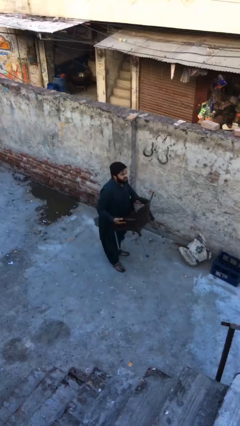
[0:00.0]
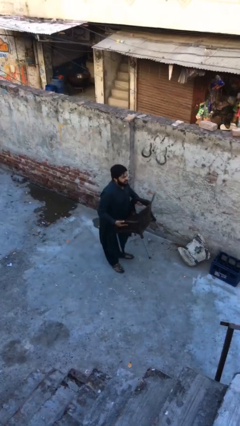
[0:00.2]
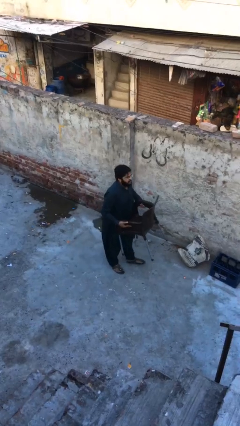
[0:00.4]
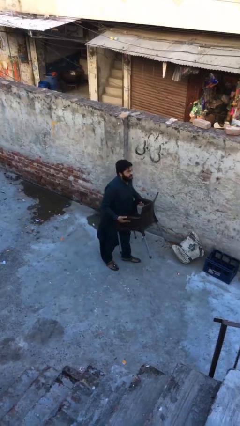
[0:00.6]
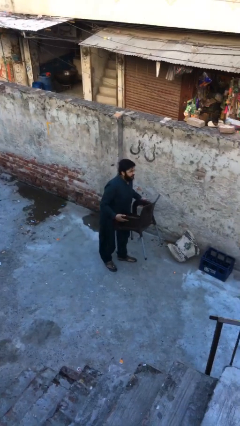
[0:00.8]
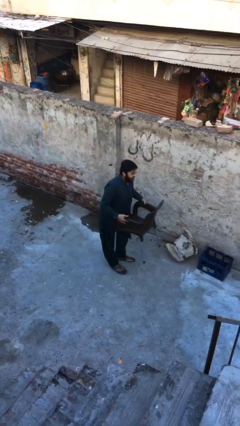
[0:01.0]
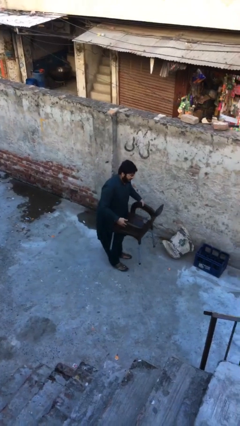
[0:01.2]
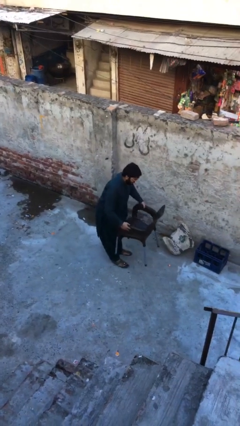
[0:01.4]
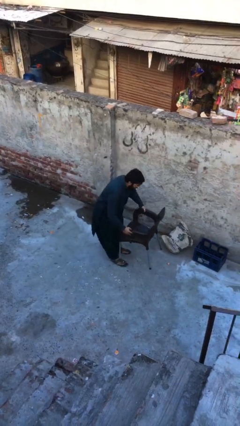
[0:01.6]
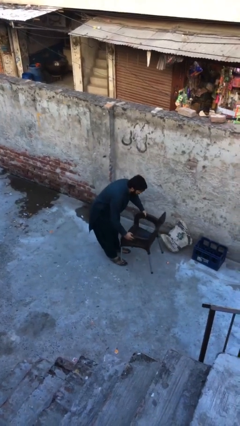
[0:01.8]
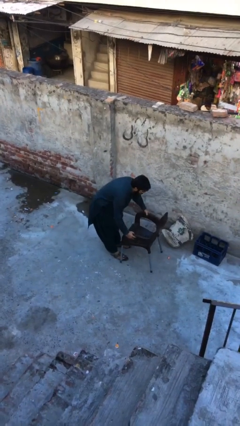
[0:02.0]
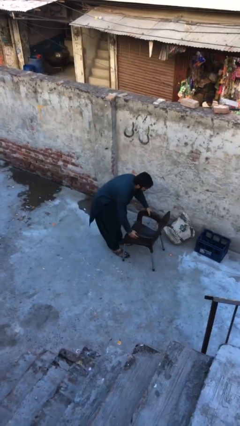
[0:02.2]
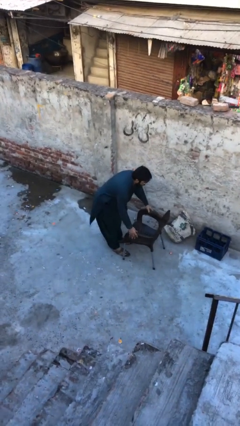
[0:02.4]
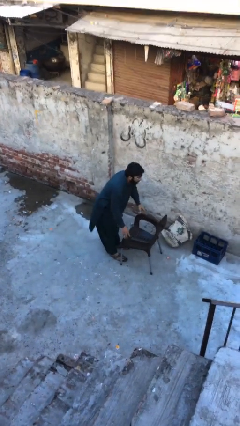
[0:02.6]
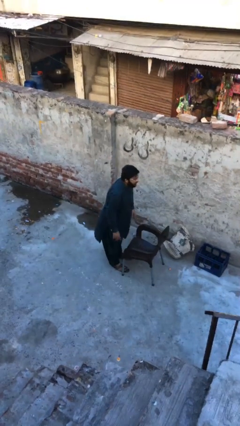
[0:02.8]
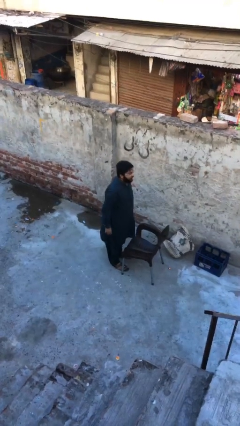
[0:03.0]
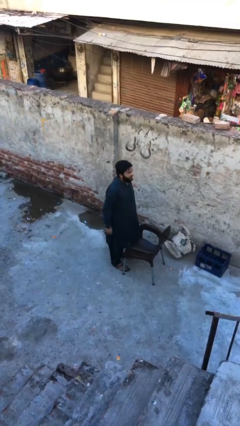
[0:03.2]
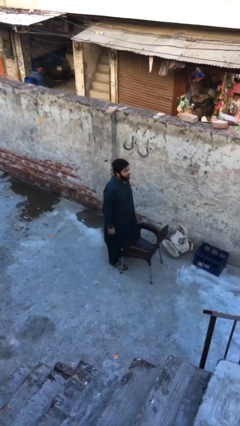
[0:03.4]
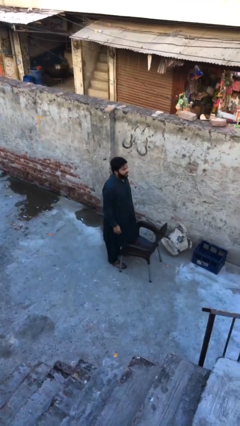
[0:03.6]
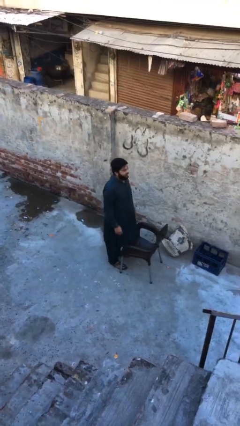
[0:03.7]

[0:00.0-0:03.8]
person puts down object on floor

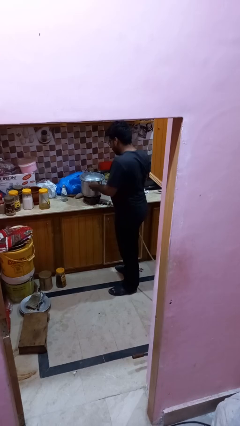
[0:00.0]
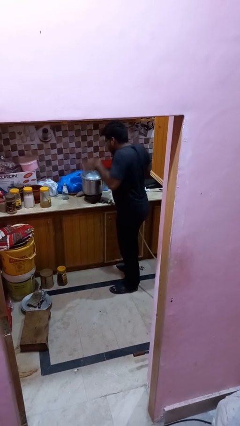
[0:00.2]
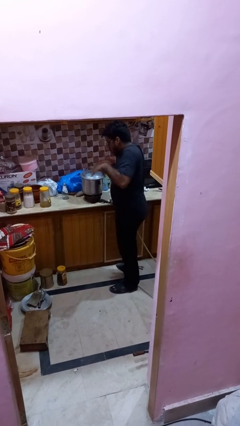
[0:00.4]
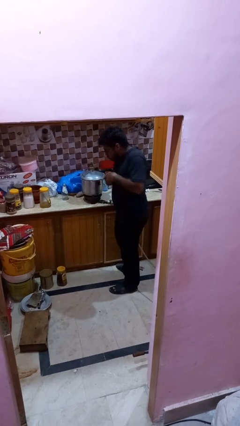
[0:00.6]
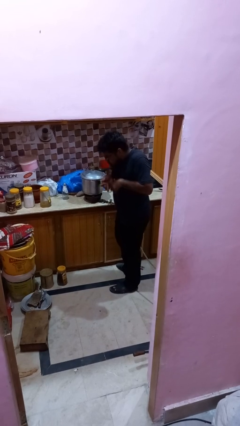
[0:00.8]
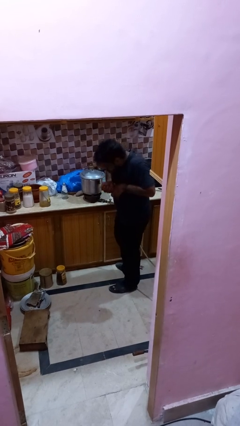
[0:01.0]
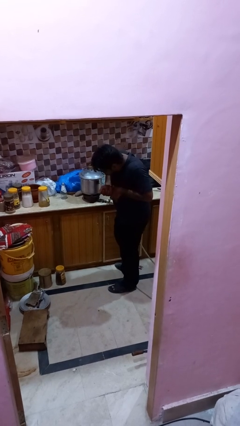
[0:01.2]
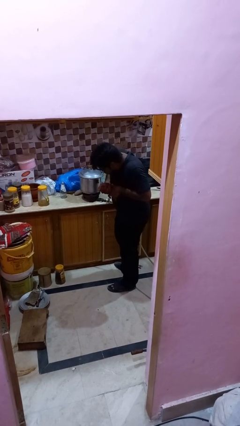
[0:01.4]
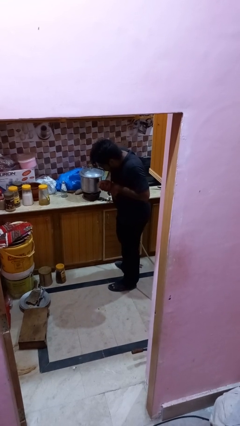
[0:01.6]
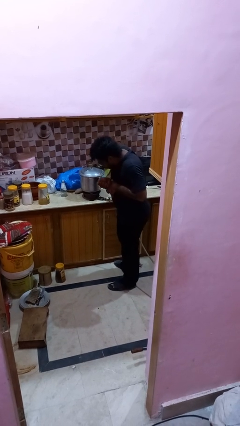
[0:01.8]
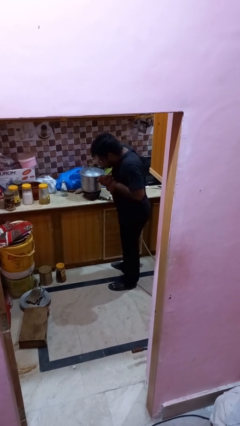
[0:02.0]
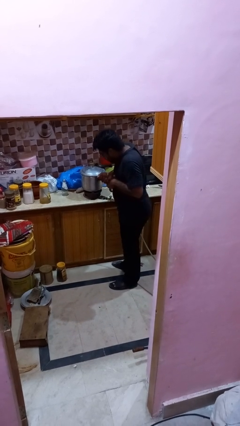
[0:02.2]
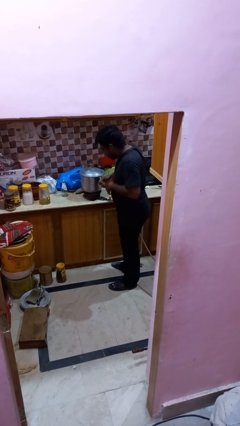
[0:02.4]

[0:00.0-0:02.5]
person burns hand

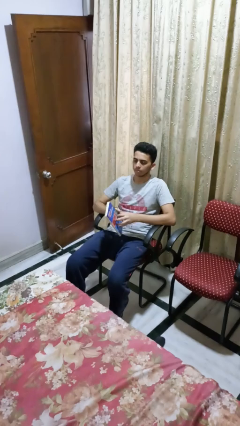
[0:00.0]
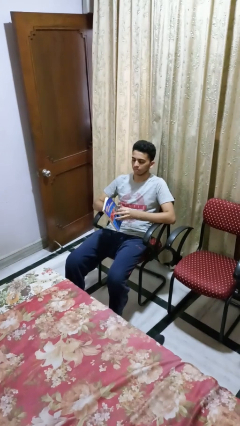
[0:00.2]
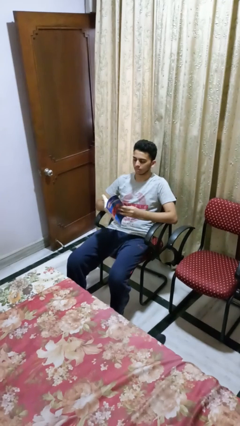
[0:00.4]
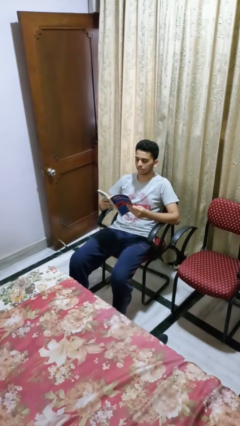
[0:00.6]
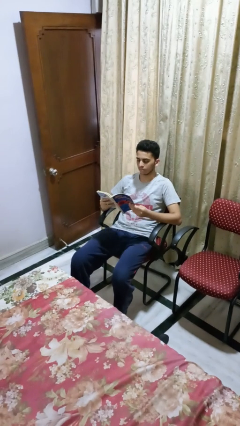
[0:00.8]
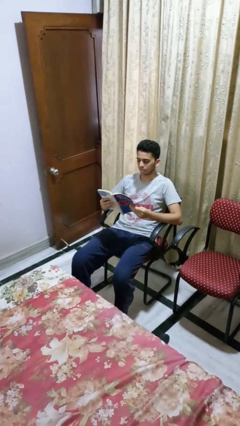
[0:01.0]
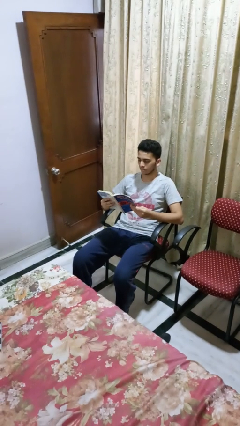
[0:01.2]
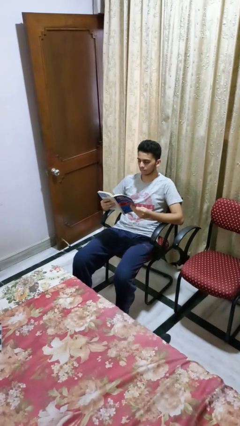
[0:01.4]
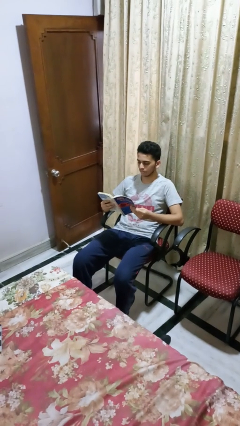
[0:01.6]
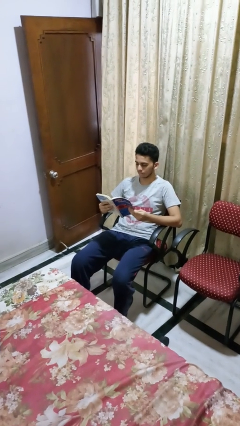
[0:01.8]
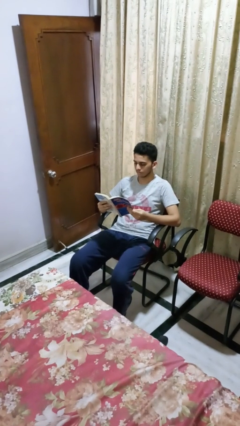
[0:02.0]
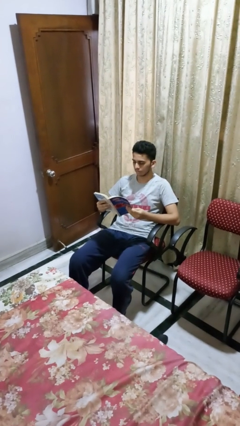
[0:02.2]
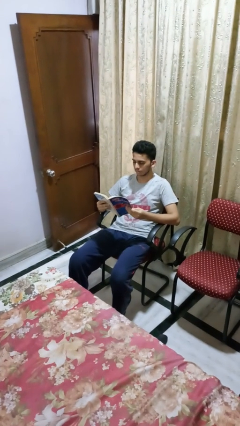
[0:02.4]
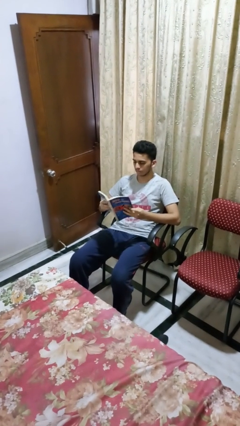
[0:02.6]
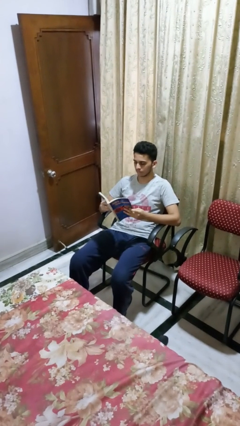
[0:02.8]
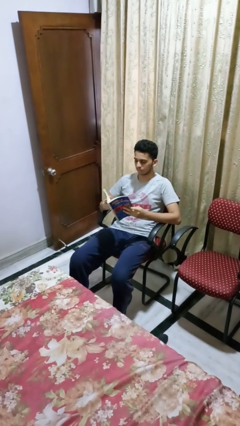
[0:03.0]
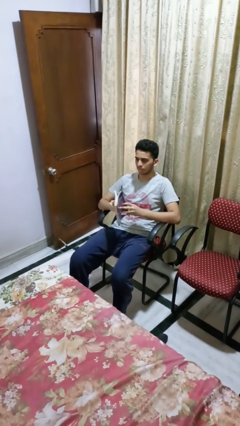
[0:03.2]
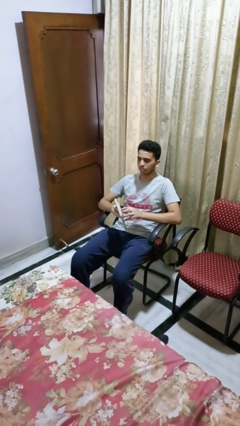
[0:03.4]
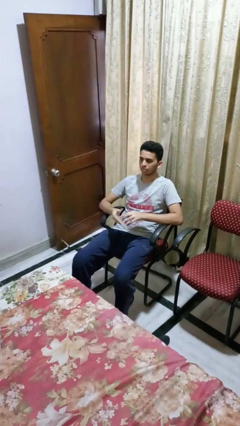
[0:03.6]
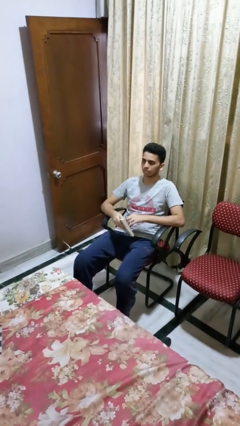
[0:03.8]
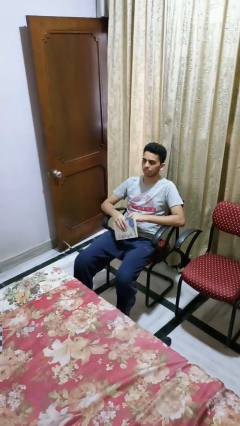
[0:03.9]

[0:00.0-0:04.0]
person reads book

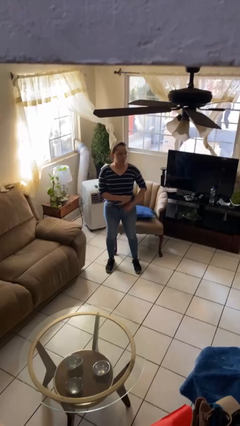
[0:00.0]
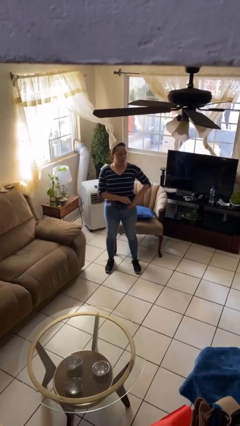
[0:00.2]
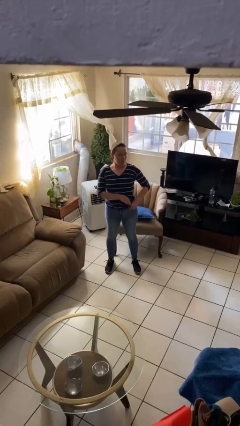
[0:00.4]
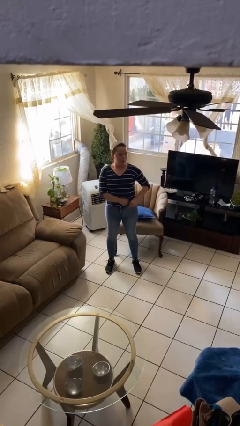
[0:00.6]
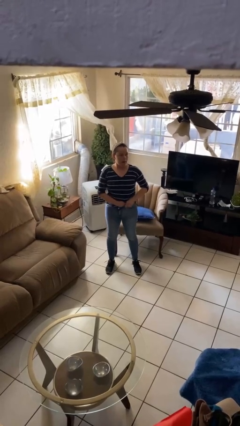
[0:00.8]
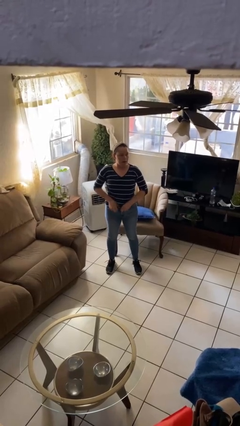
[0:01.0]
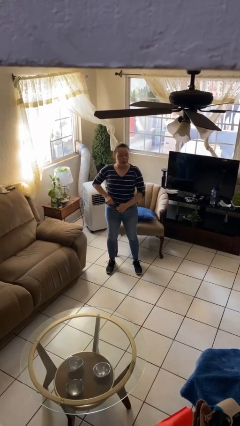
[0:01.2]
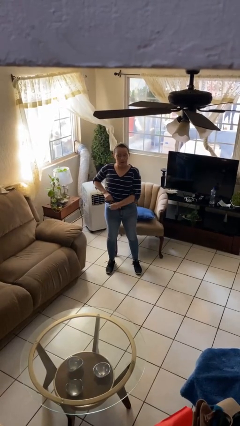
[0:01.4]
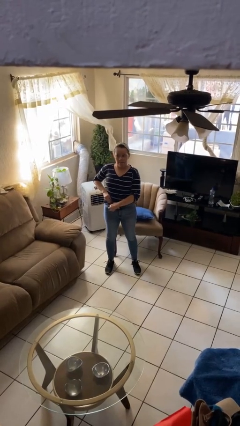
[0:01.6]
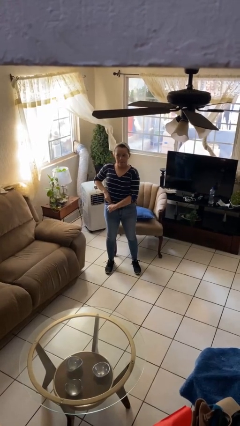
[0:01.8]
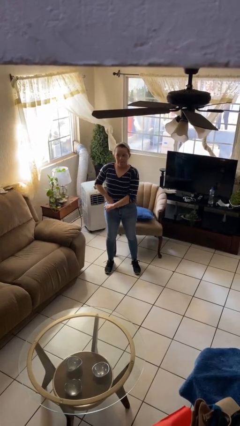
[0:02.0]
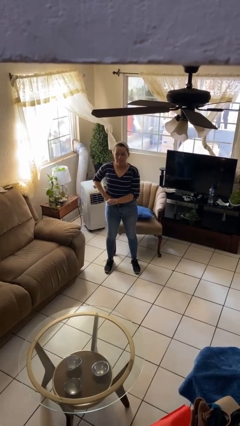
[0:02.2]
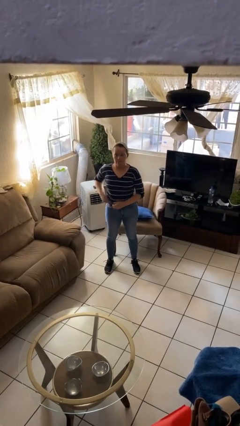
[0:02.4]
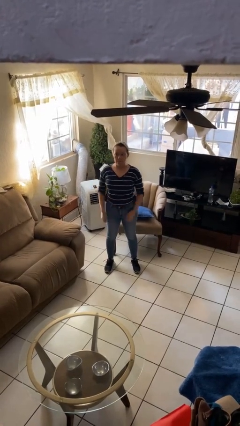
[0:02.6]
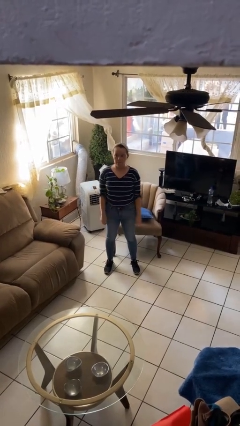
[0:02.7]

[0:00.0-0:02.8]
person tucks in shirt

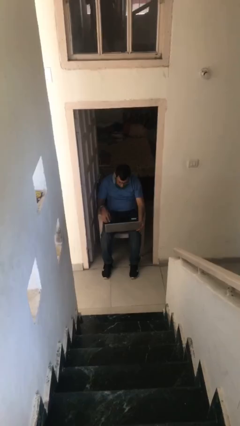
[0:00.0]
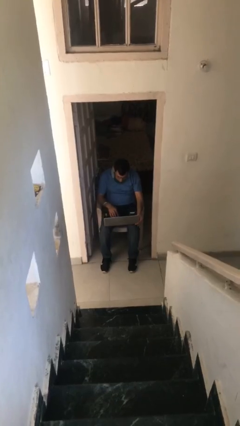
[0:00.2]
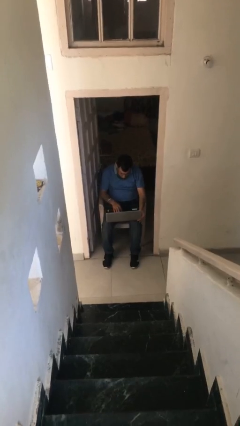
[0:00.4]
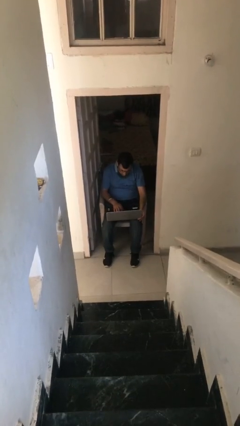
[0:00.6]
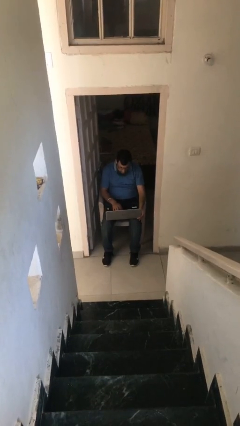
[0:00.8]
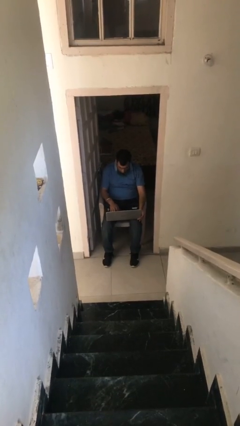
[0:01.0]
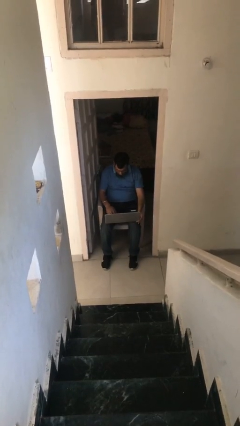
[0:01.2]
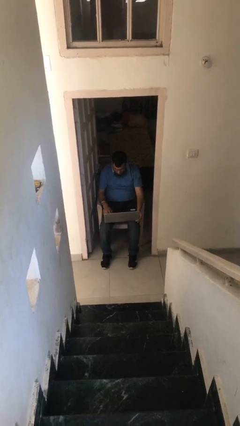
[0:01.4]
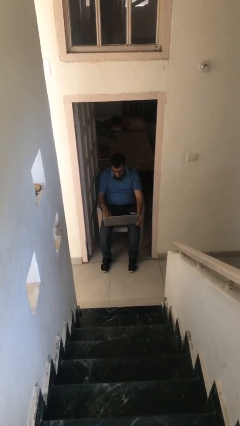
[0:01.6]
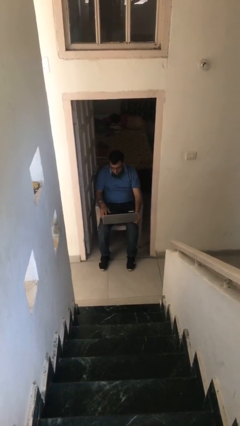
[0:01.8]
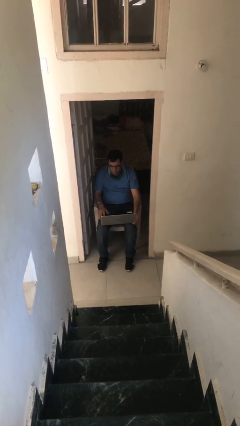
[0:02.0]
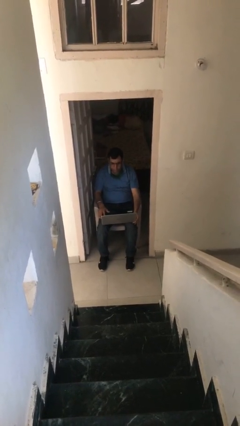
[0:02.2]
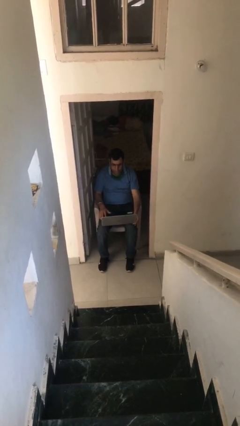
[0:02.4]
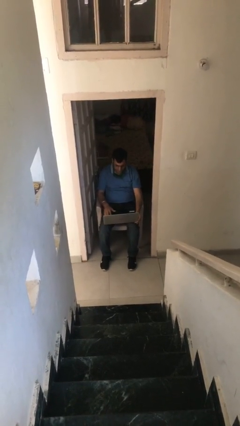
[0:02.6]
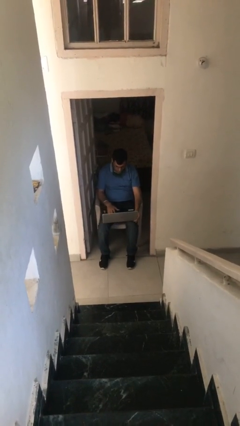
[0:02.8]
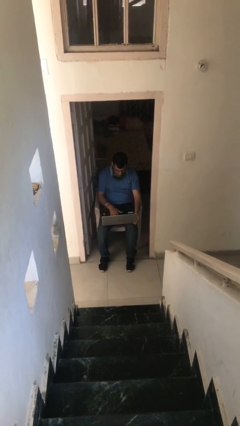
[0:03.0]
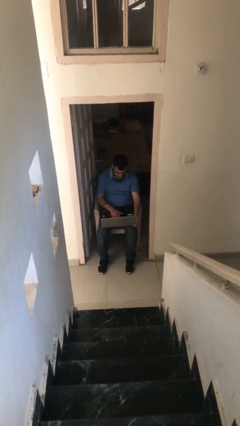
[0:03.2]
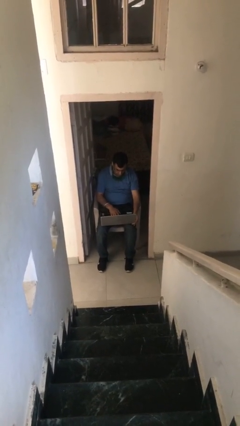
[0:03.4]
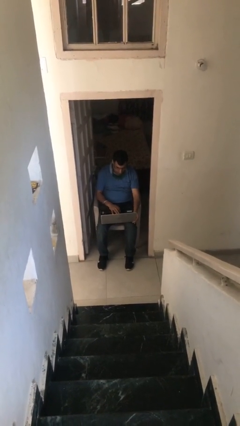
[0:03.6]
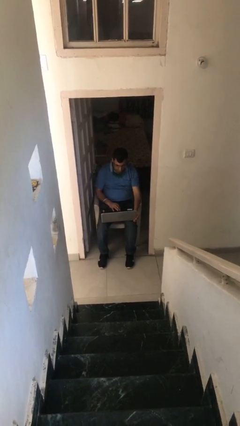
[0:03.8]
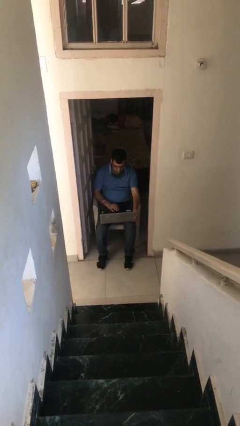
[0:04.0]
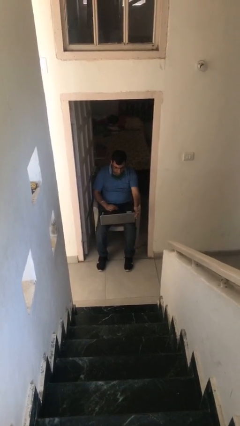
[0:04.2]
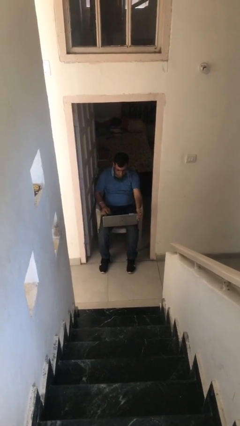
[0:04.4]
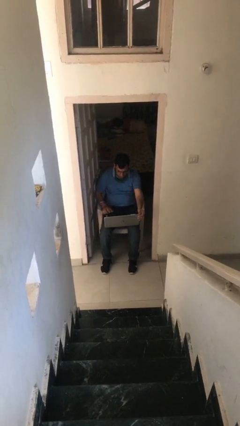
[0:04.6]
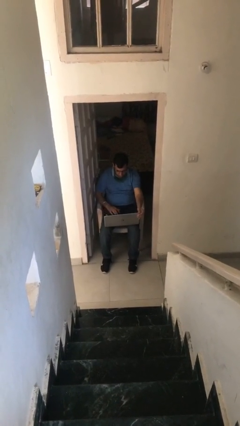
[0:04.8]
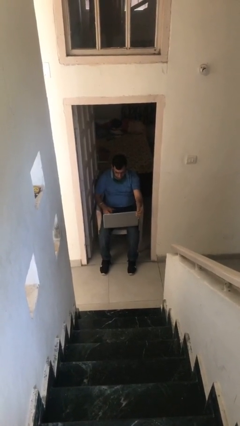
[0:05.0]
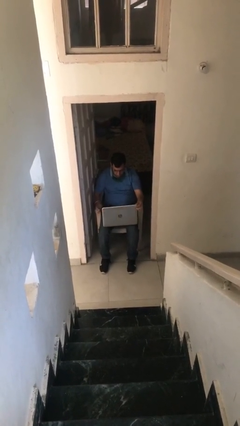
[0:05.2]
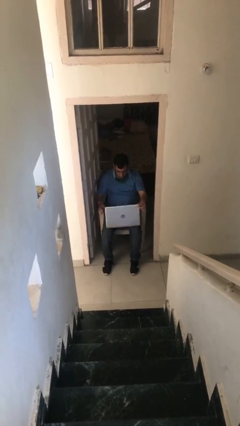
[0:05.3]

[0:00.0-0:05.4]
person interacts with laptop
